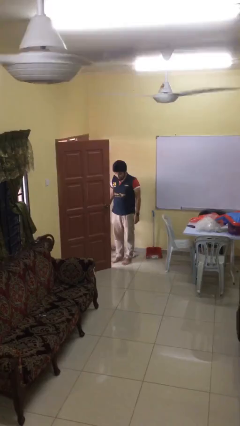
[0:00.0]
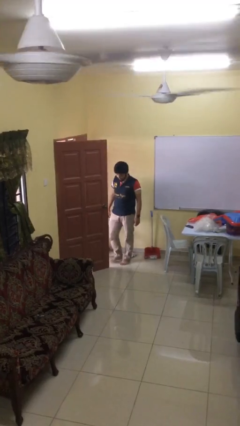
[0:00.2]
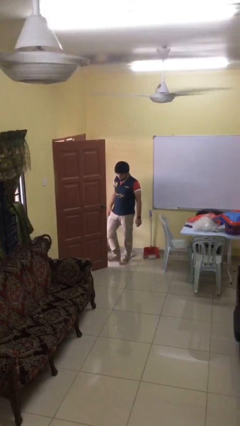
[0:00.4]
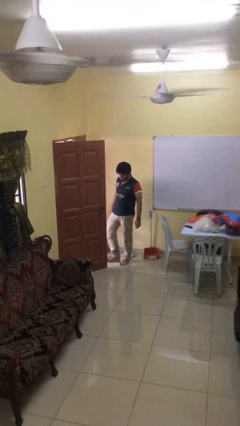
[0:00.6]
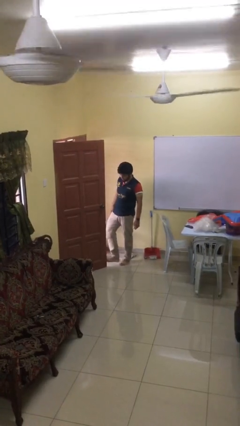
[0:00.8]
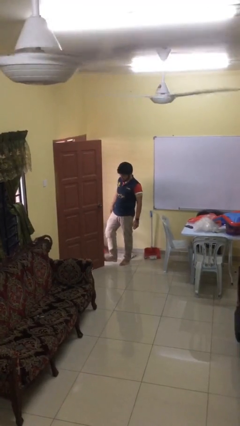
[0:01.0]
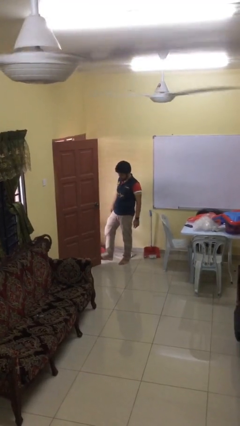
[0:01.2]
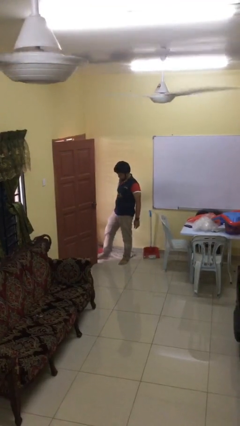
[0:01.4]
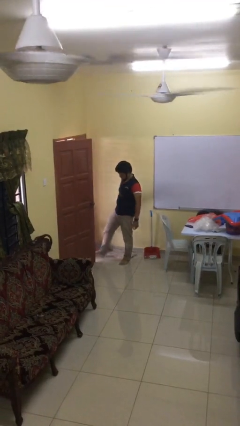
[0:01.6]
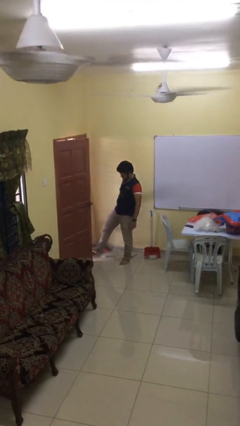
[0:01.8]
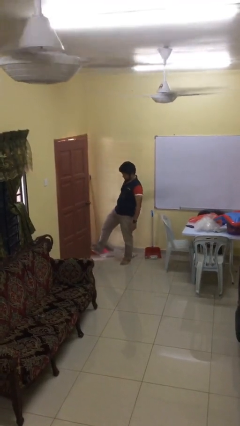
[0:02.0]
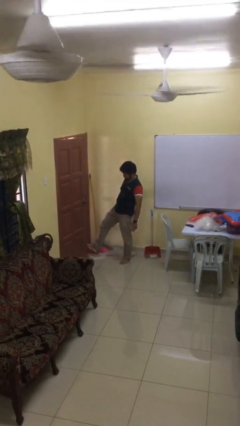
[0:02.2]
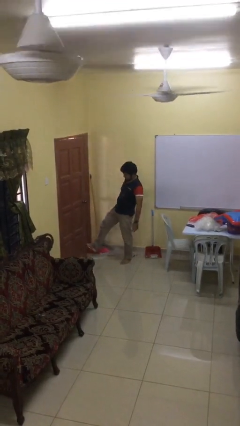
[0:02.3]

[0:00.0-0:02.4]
person closes door with foot

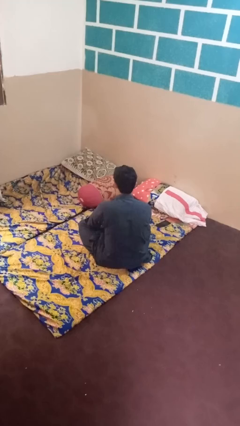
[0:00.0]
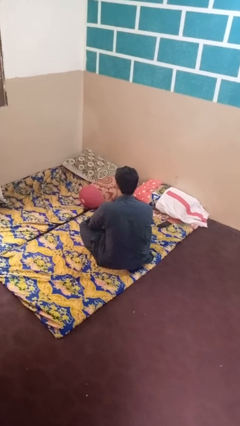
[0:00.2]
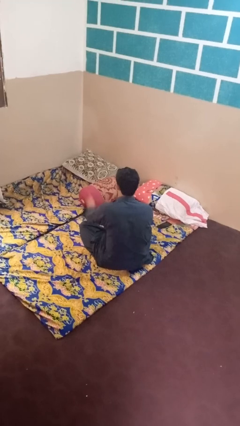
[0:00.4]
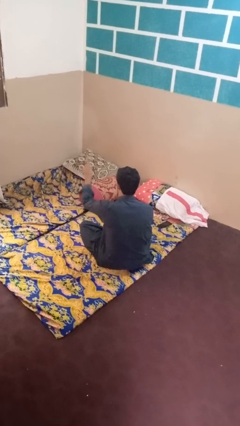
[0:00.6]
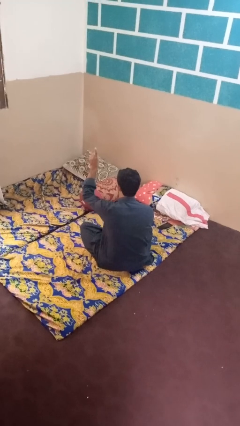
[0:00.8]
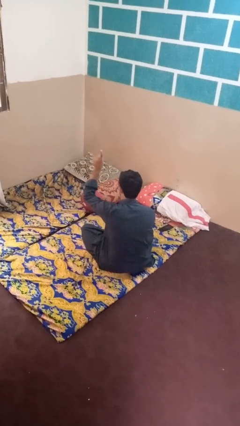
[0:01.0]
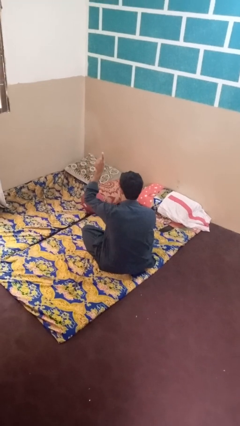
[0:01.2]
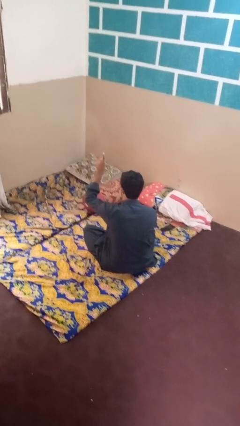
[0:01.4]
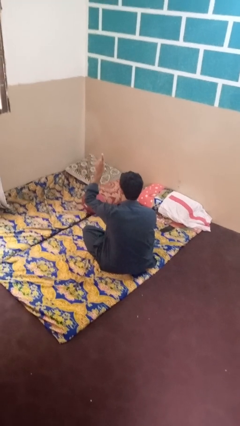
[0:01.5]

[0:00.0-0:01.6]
person gestures hang loose

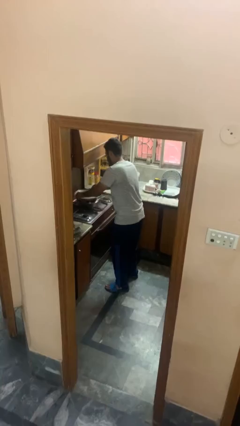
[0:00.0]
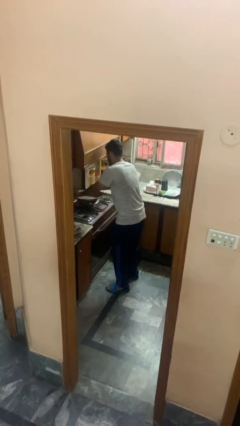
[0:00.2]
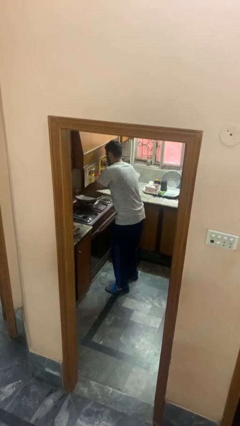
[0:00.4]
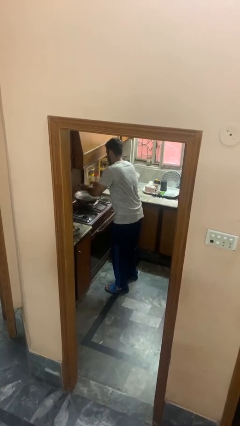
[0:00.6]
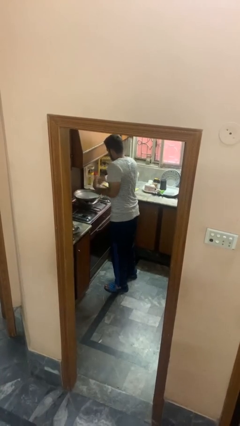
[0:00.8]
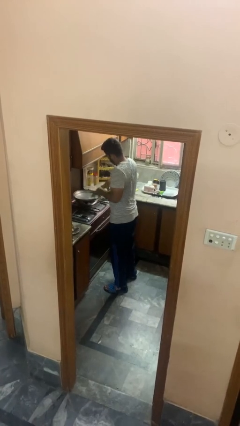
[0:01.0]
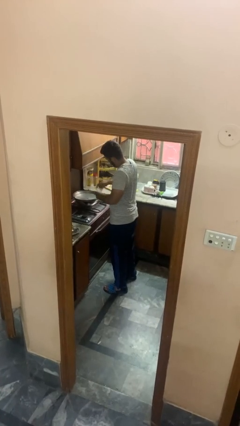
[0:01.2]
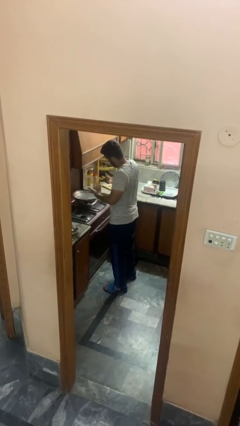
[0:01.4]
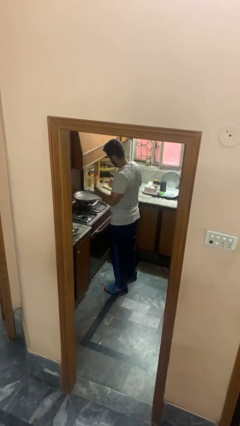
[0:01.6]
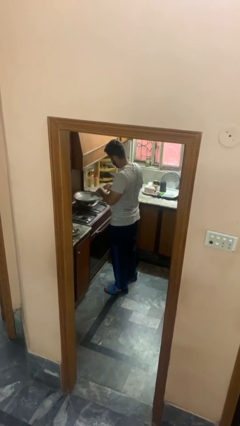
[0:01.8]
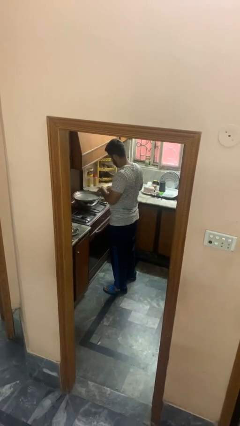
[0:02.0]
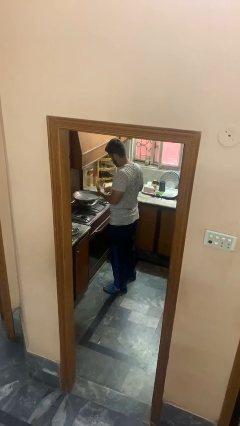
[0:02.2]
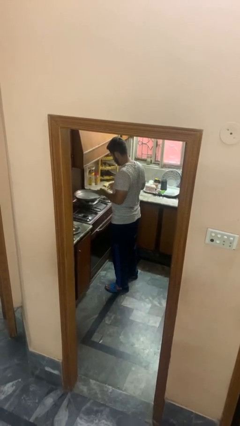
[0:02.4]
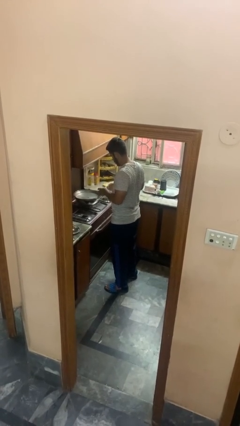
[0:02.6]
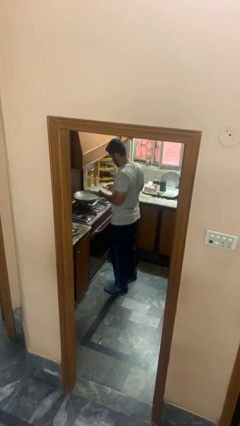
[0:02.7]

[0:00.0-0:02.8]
person burns hand

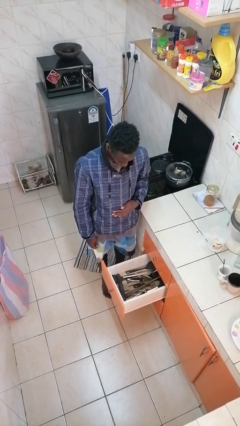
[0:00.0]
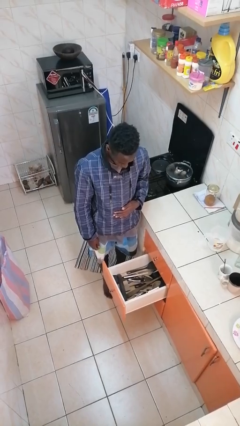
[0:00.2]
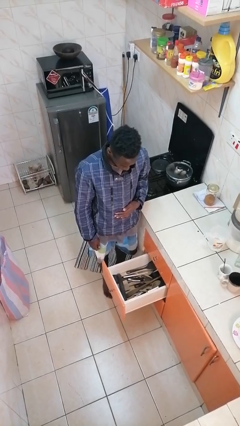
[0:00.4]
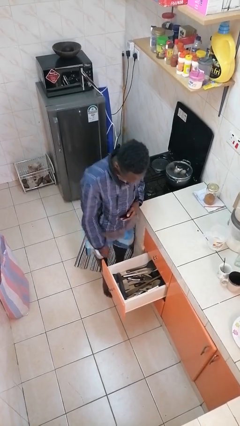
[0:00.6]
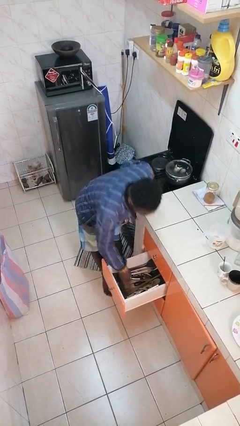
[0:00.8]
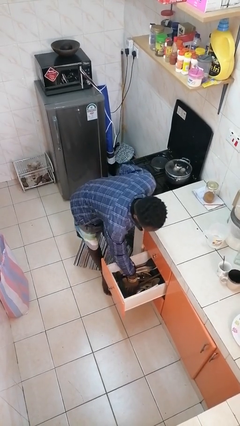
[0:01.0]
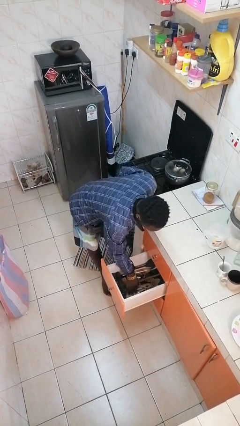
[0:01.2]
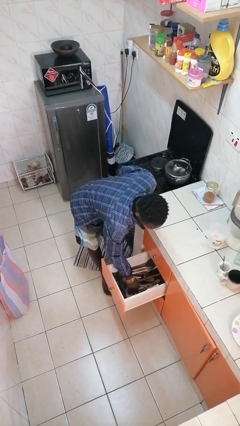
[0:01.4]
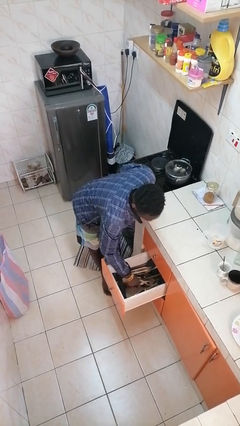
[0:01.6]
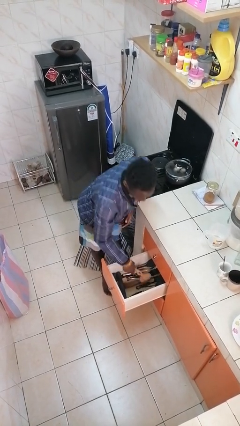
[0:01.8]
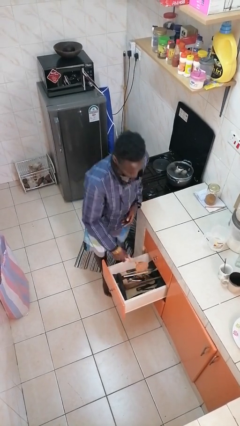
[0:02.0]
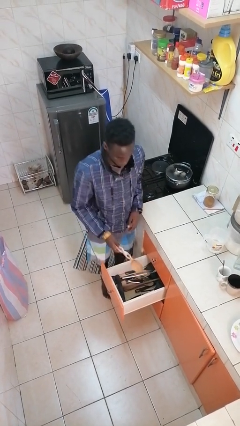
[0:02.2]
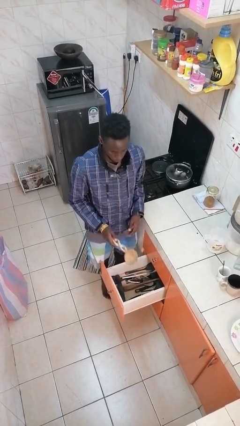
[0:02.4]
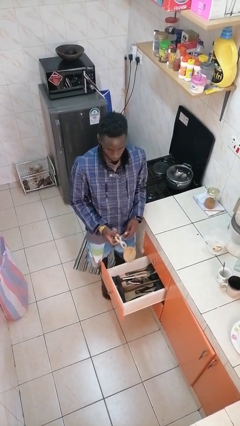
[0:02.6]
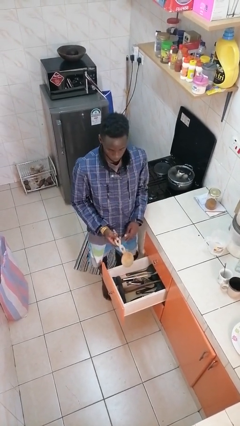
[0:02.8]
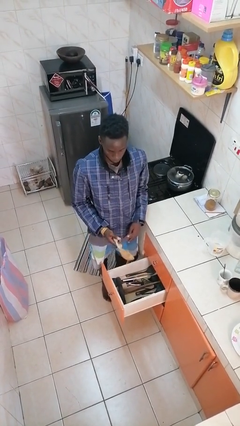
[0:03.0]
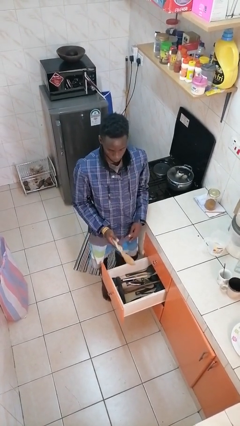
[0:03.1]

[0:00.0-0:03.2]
person takes object from kitchen drawer

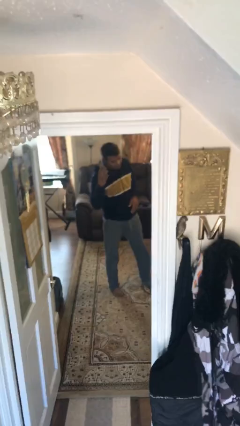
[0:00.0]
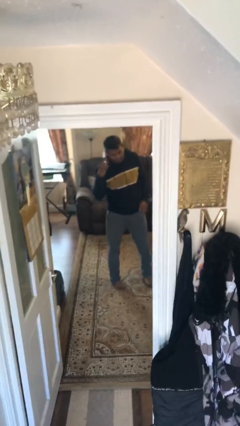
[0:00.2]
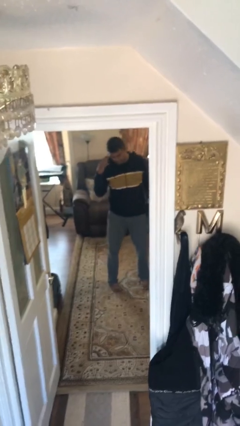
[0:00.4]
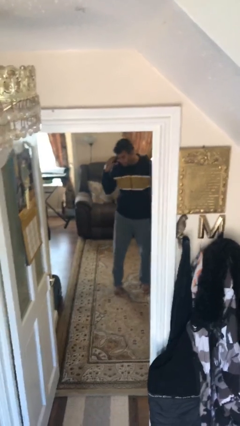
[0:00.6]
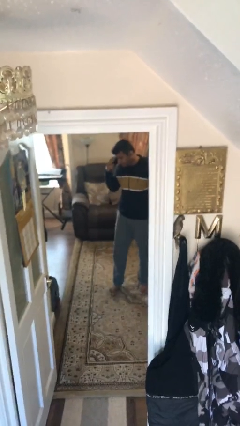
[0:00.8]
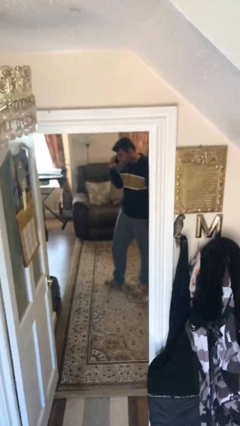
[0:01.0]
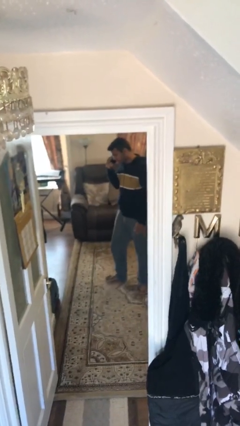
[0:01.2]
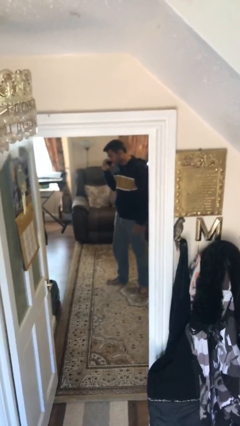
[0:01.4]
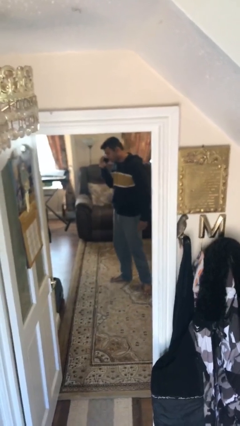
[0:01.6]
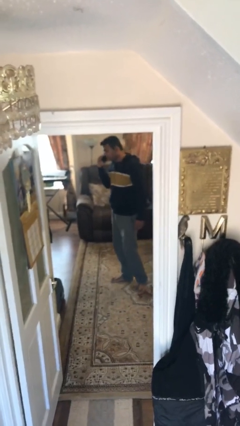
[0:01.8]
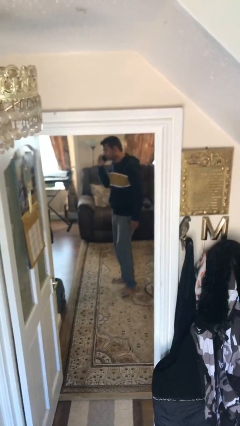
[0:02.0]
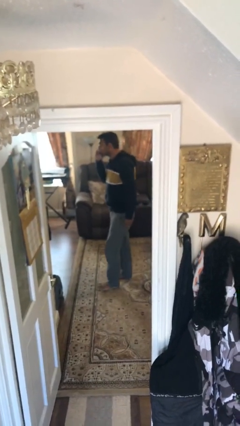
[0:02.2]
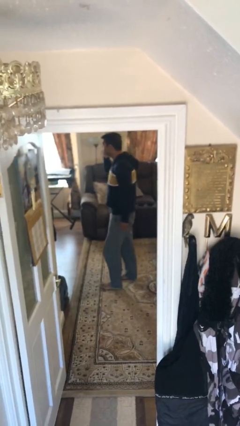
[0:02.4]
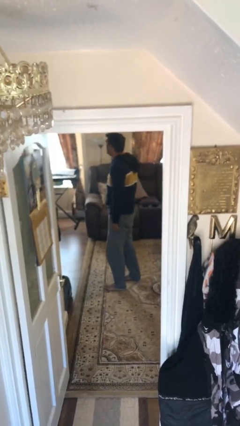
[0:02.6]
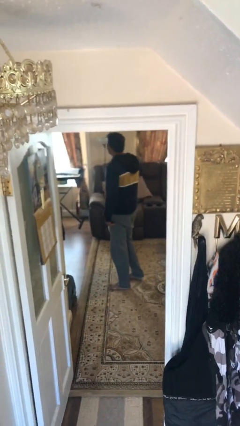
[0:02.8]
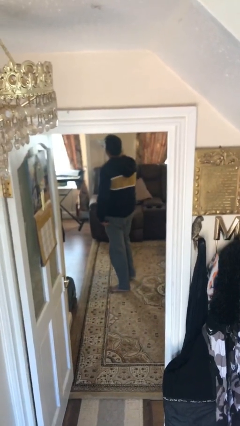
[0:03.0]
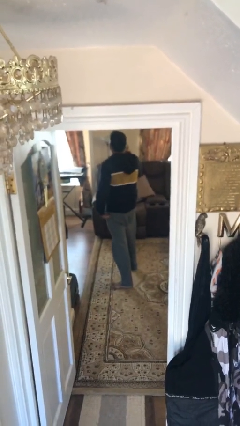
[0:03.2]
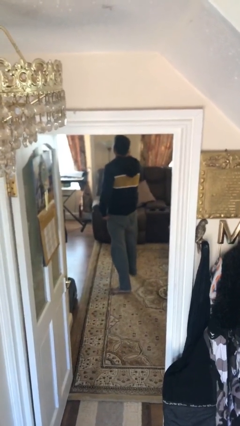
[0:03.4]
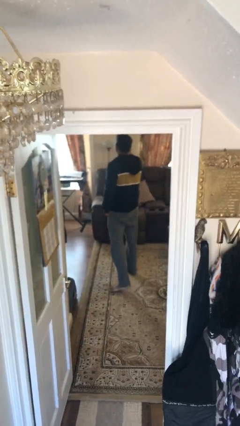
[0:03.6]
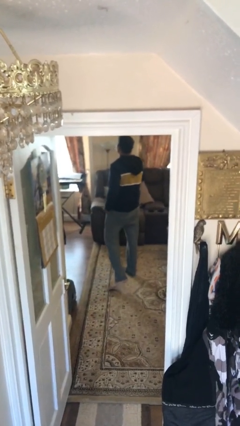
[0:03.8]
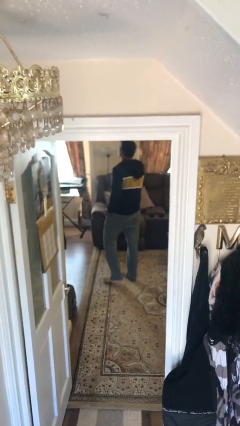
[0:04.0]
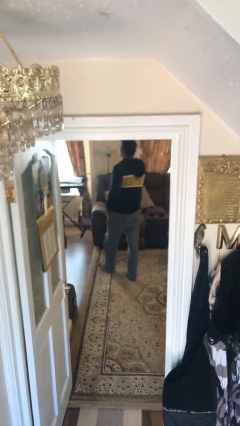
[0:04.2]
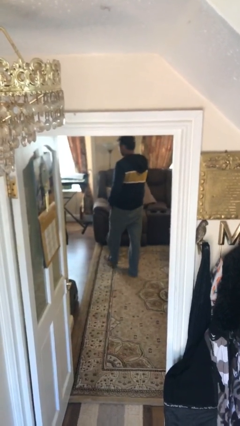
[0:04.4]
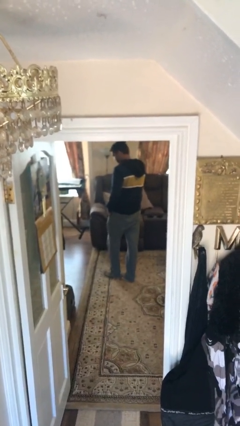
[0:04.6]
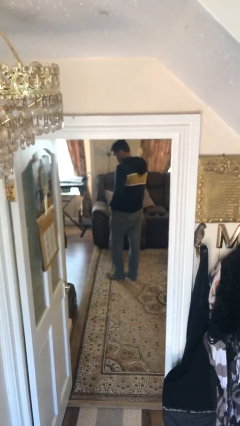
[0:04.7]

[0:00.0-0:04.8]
person talks on phone

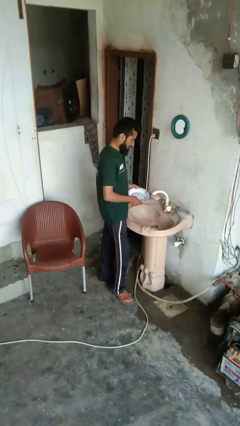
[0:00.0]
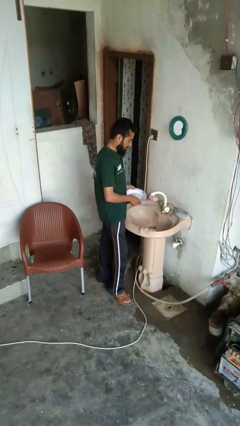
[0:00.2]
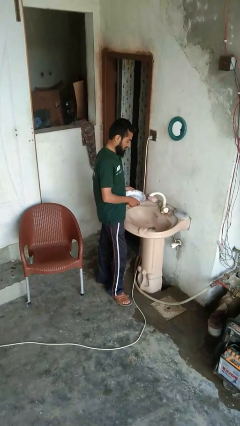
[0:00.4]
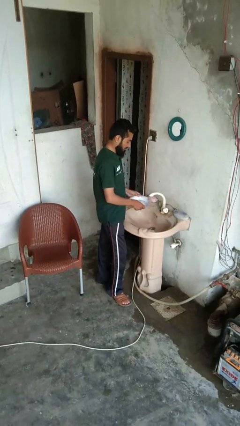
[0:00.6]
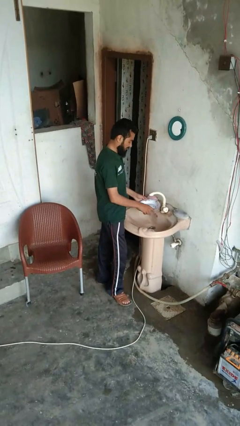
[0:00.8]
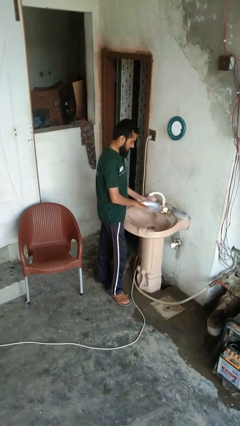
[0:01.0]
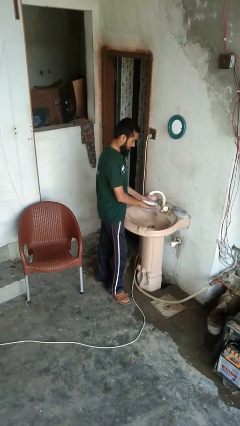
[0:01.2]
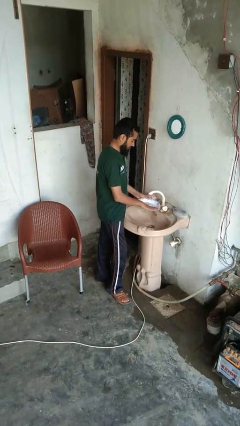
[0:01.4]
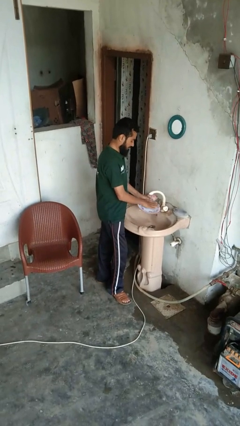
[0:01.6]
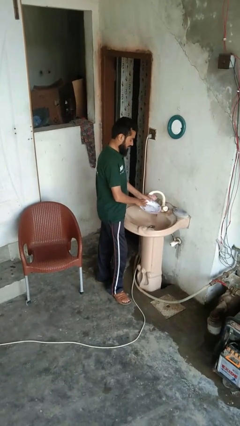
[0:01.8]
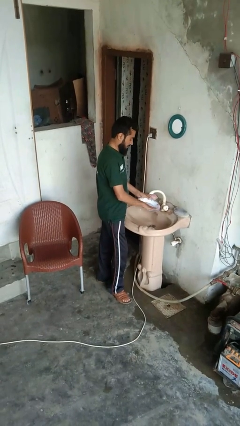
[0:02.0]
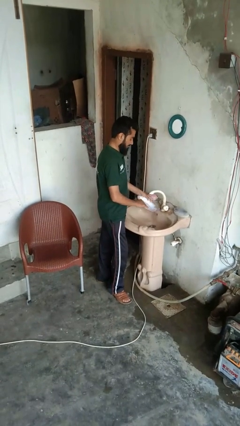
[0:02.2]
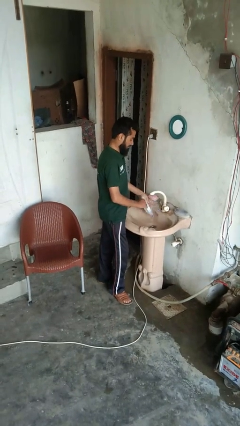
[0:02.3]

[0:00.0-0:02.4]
person washes dish
